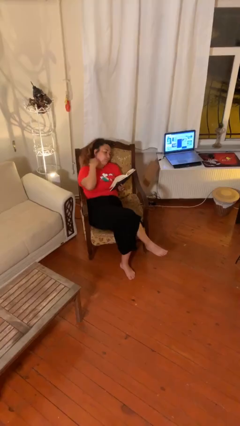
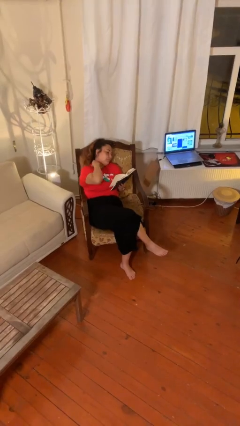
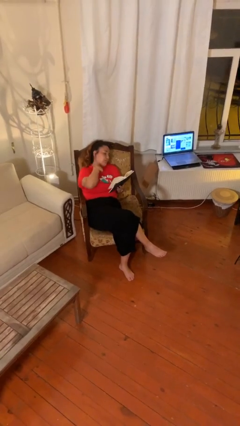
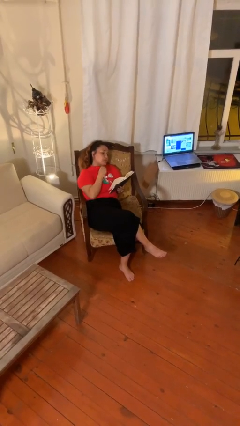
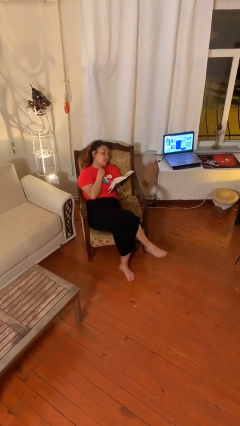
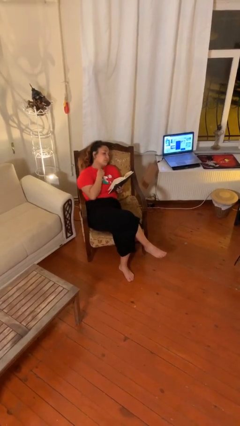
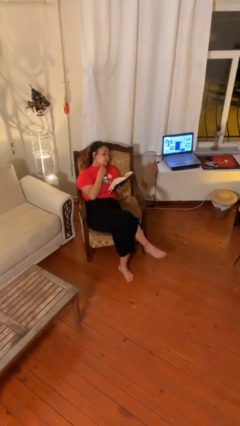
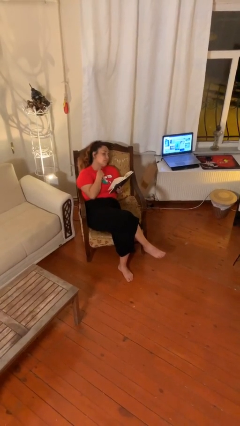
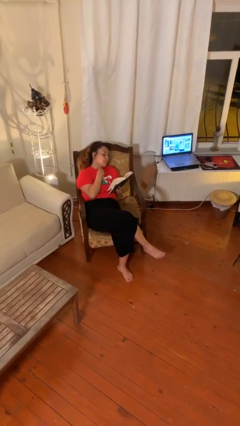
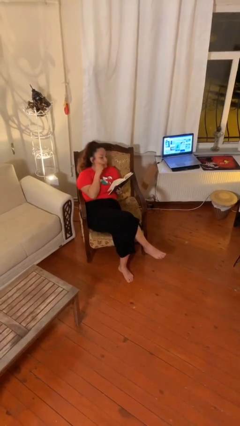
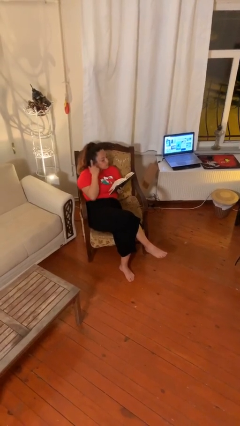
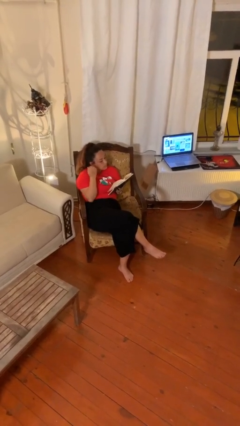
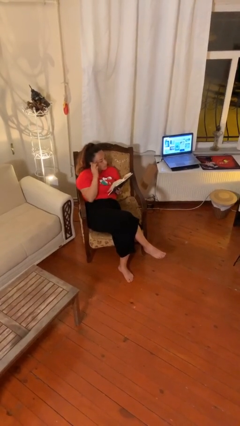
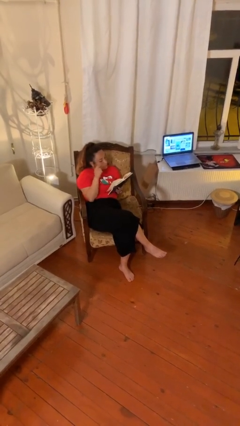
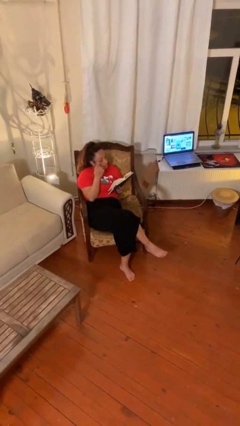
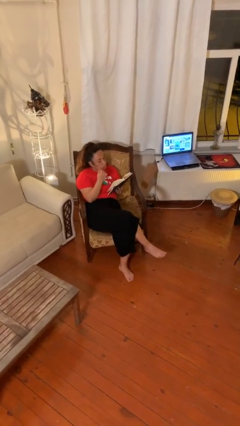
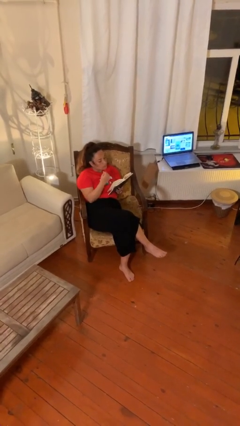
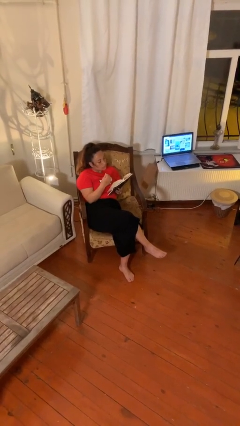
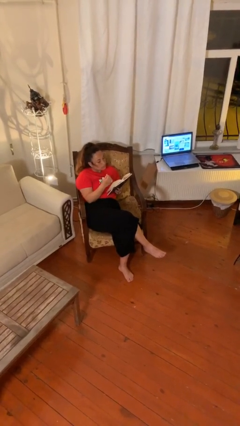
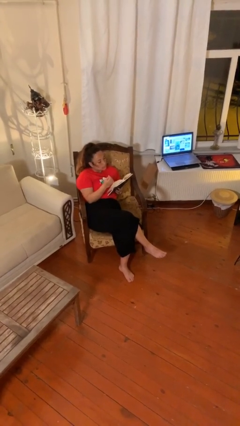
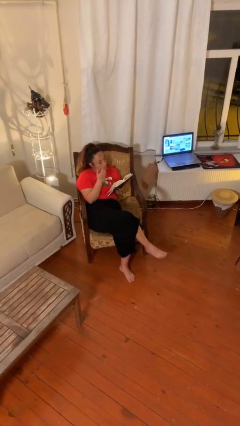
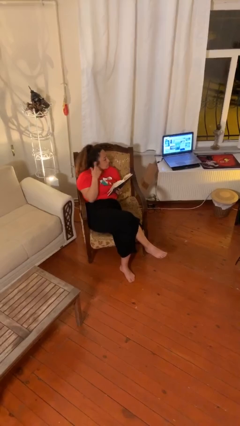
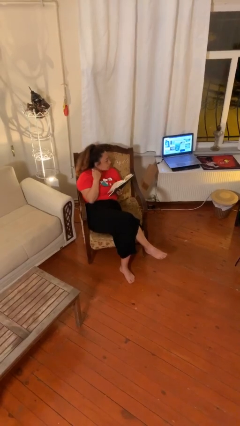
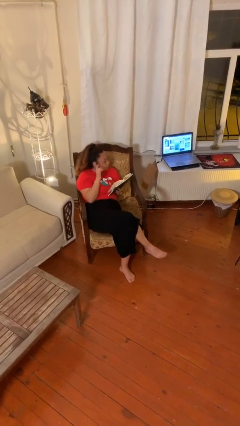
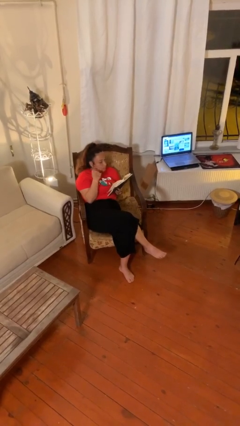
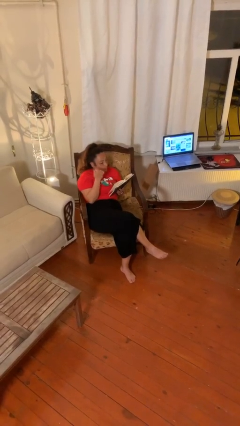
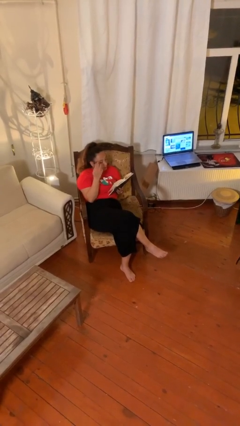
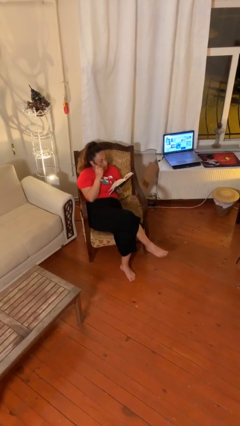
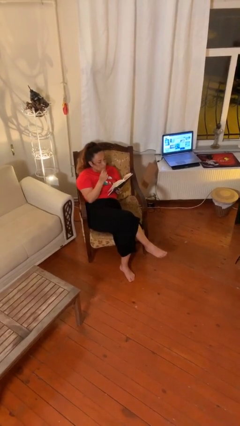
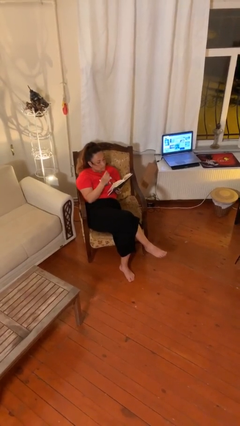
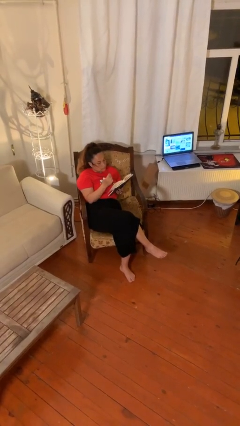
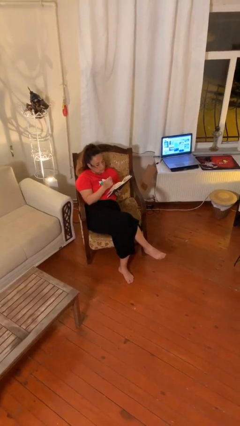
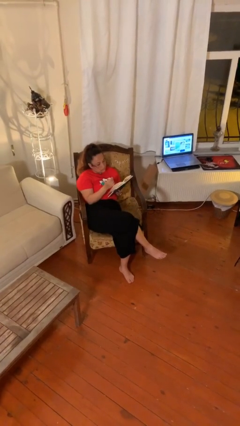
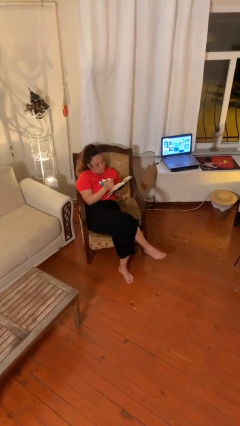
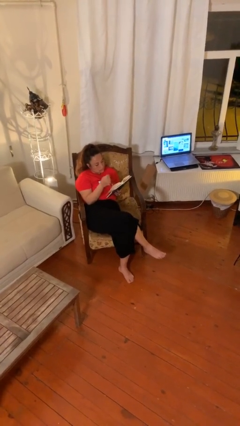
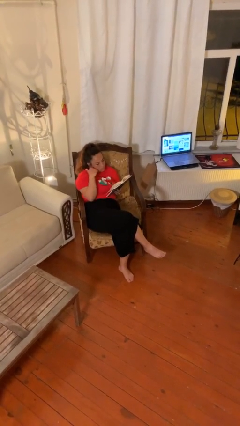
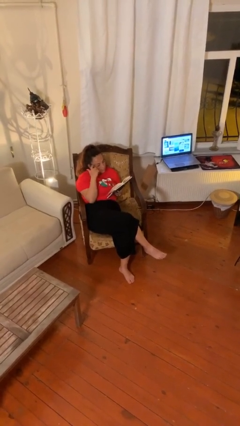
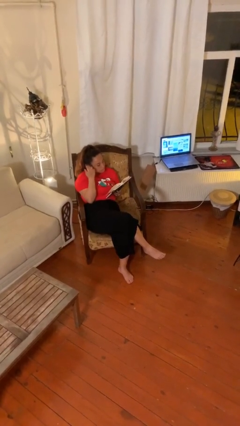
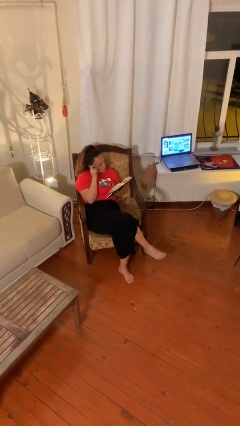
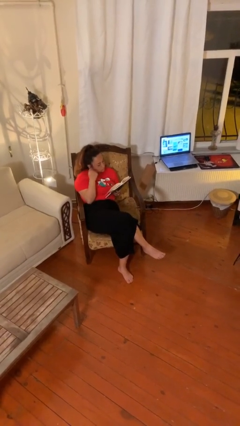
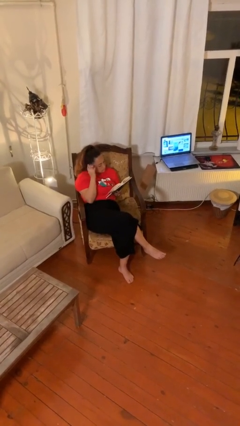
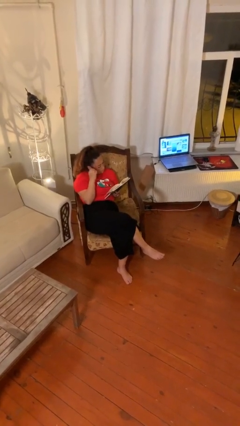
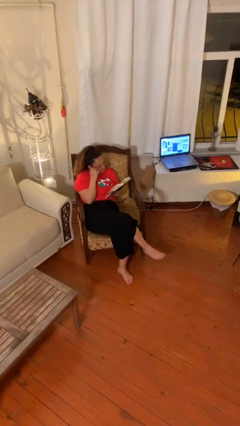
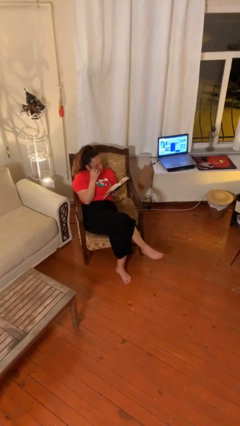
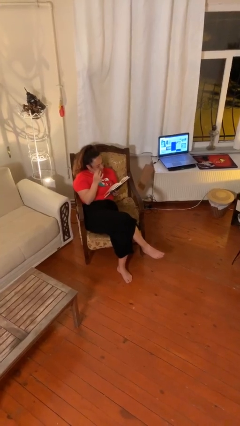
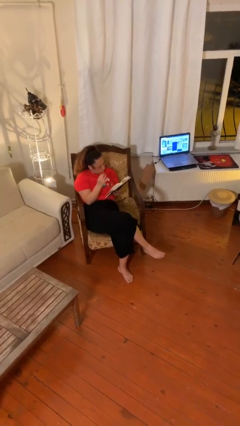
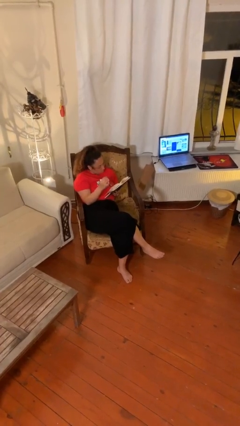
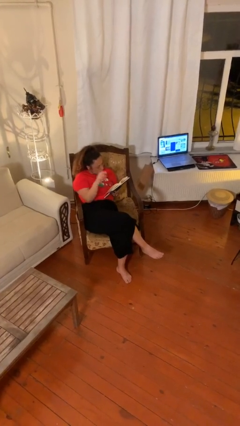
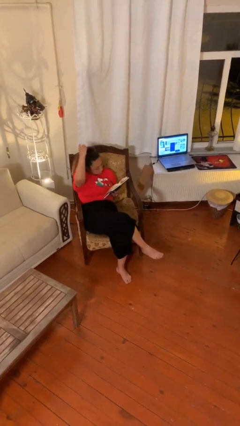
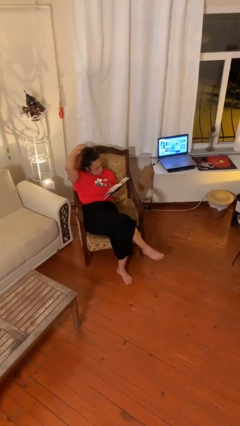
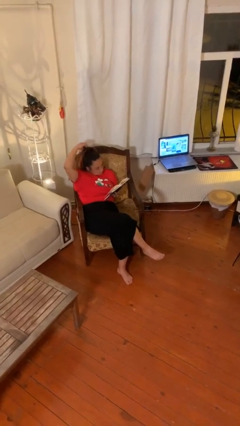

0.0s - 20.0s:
person reads document

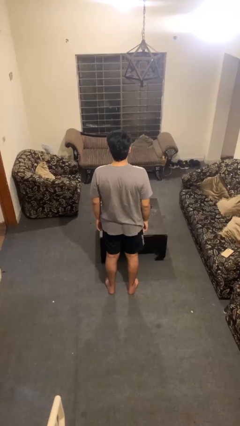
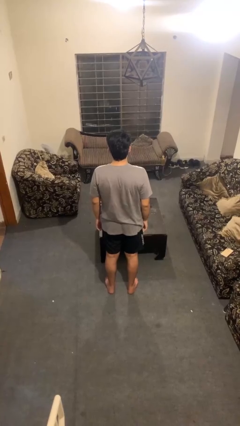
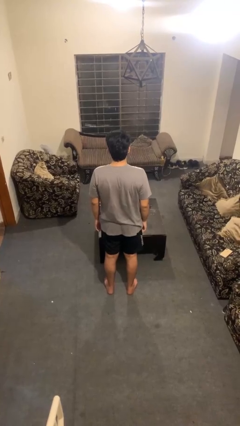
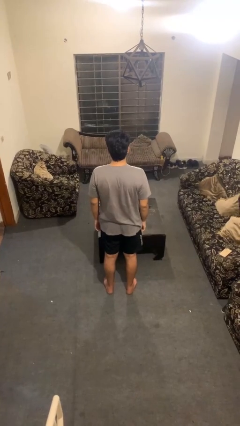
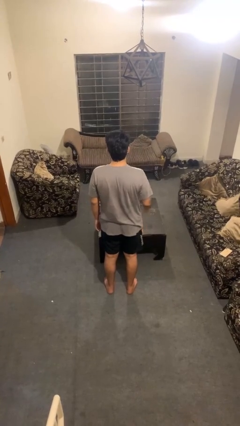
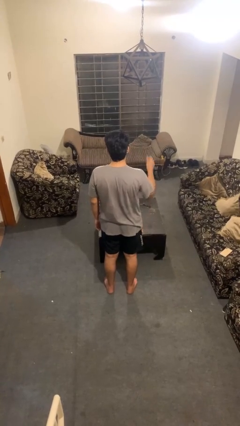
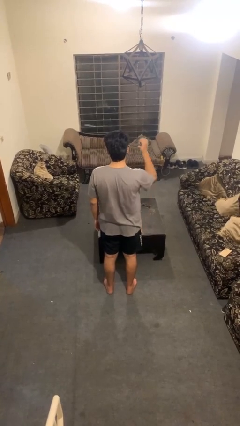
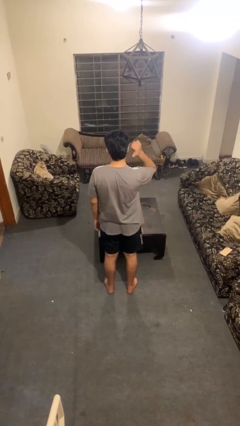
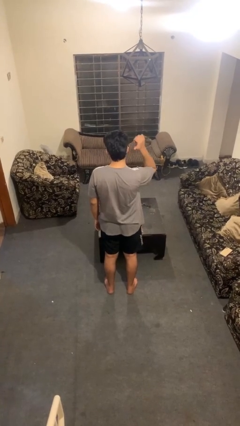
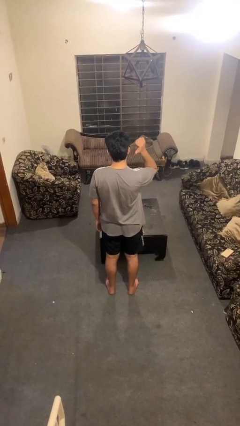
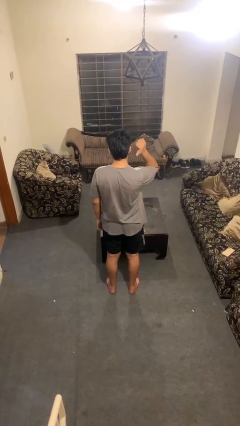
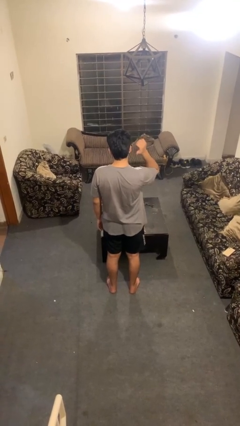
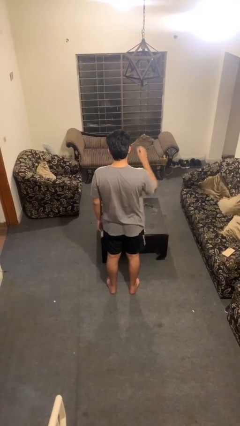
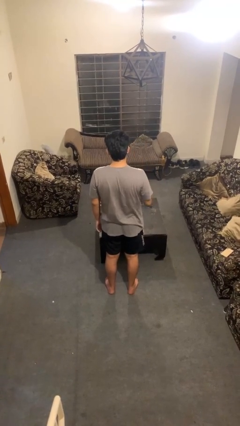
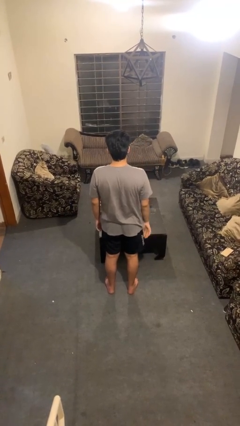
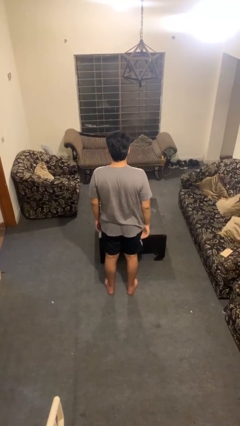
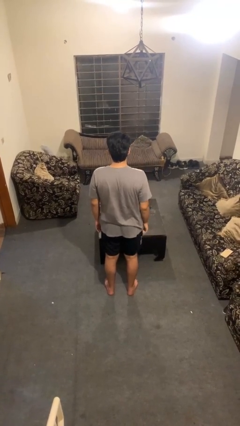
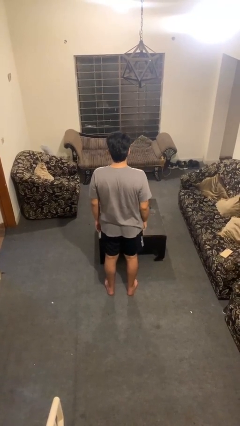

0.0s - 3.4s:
person gestures behind me

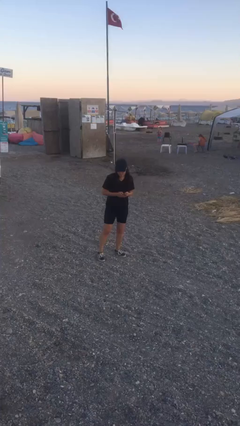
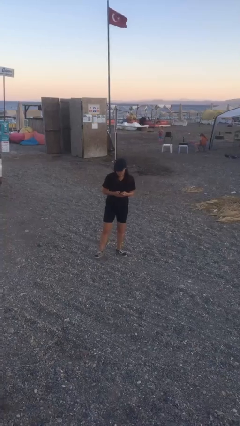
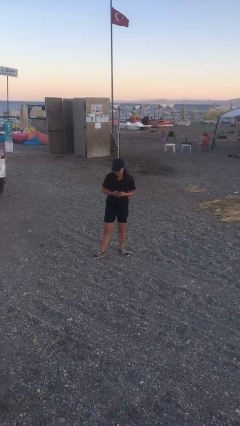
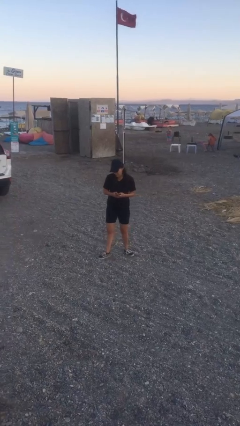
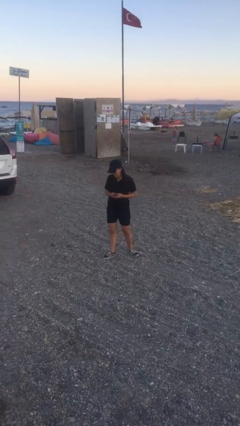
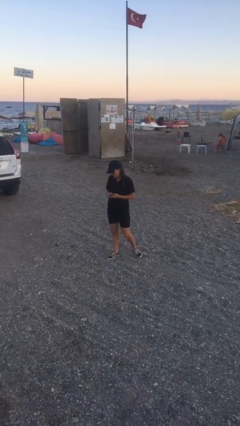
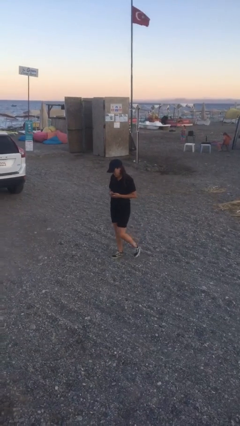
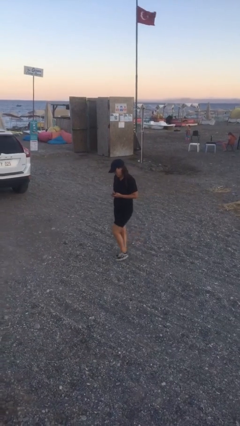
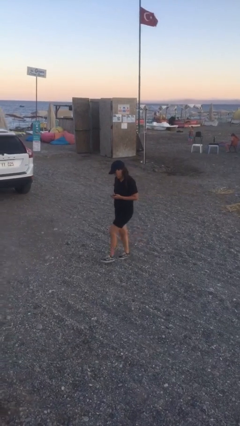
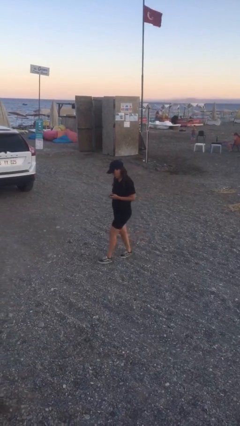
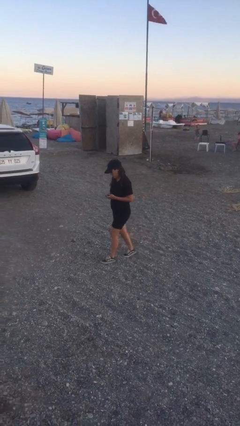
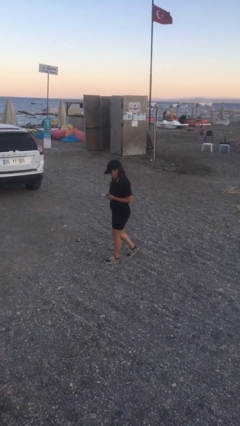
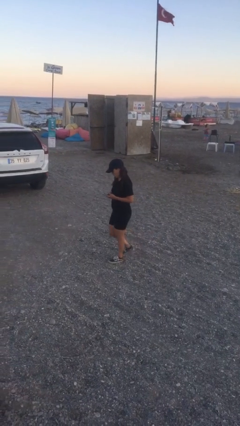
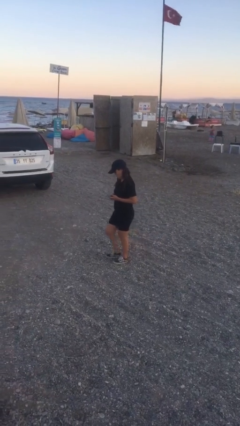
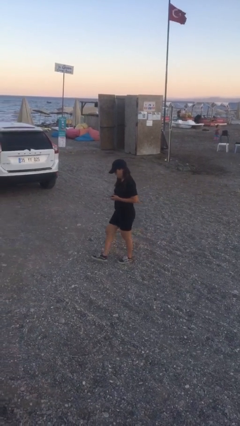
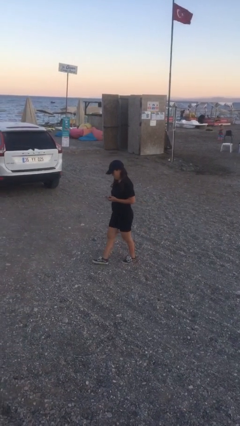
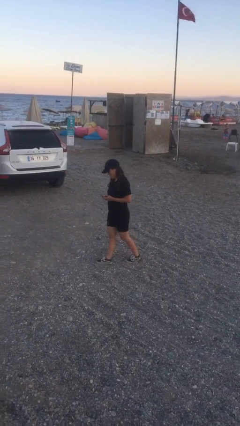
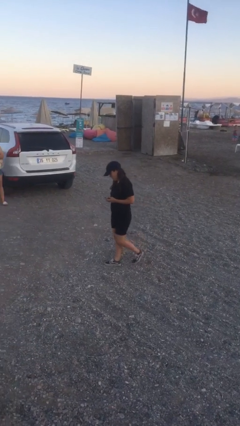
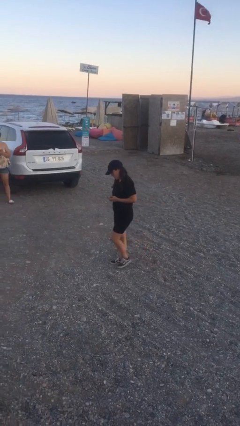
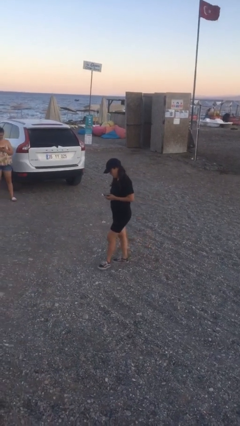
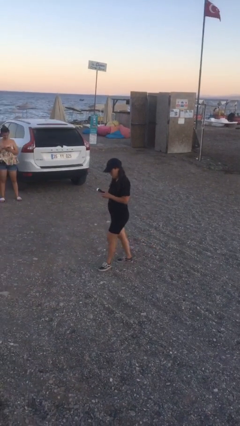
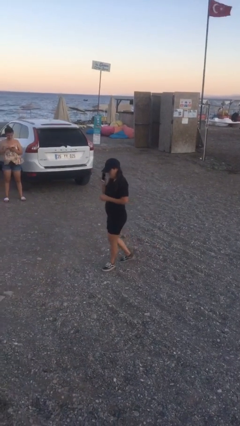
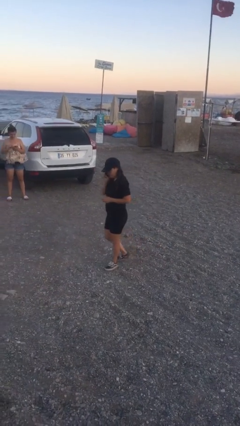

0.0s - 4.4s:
person texts on phone
